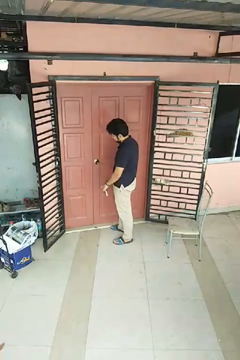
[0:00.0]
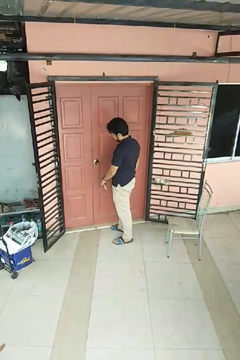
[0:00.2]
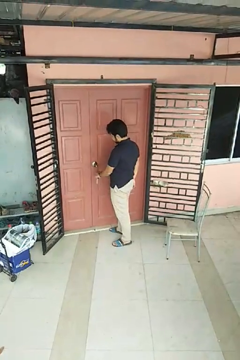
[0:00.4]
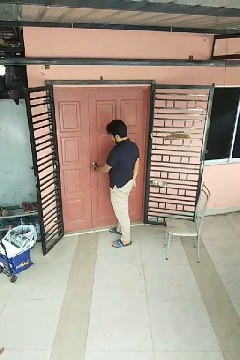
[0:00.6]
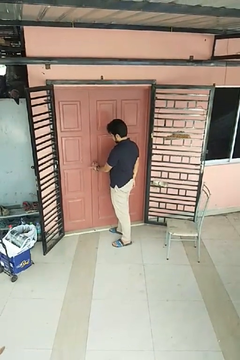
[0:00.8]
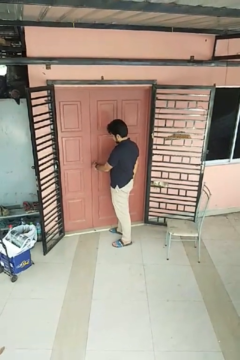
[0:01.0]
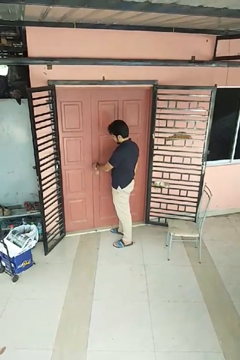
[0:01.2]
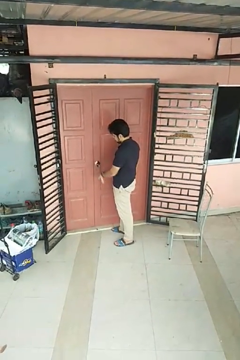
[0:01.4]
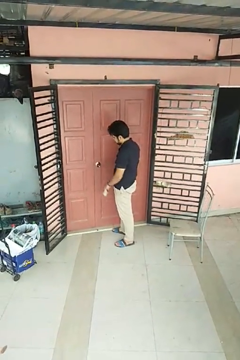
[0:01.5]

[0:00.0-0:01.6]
person unlocks door with keys

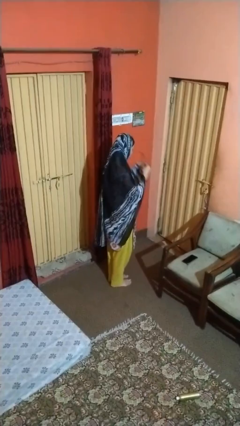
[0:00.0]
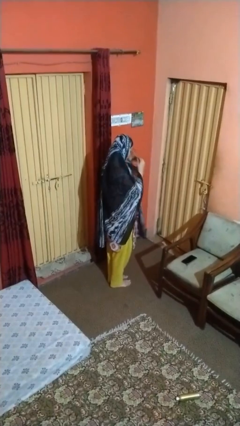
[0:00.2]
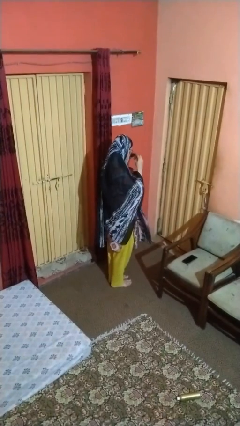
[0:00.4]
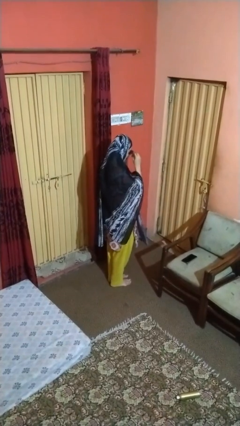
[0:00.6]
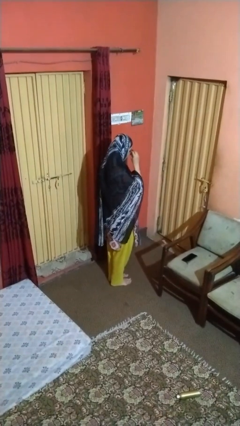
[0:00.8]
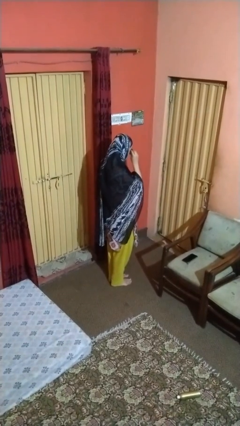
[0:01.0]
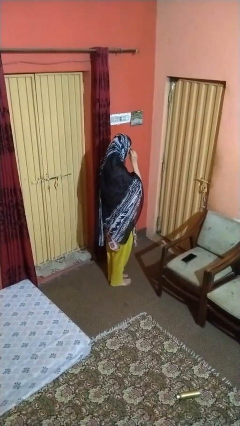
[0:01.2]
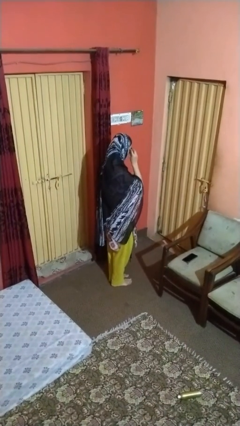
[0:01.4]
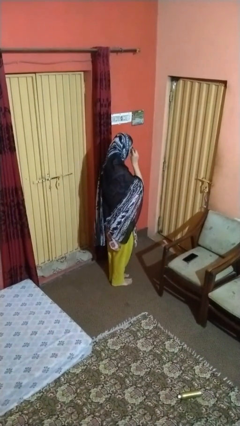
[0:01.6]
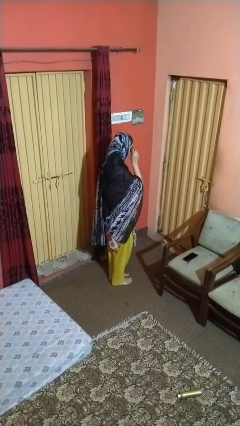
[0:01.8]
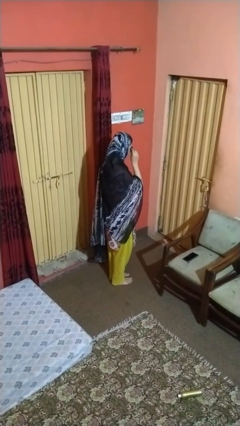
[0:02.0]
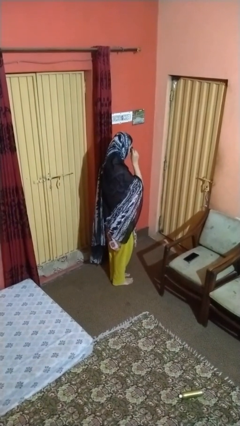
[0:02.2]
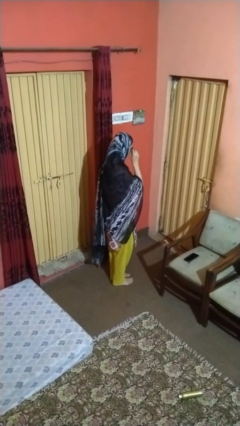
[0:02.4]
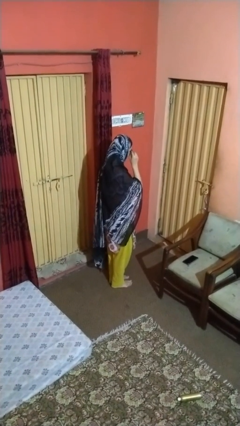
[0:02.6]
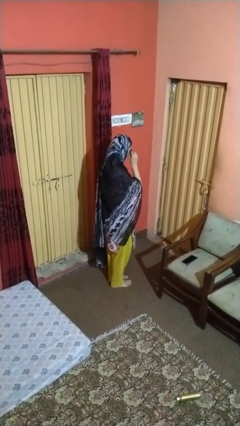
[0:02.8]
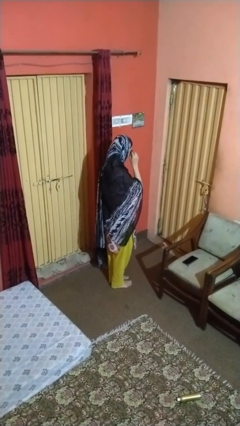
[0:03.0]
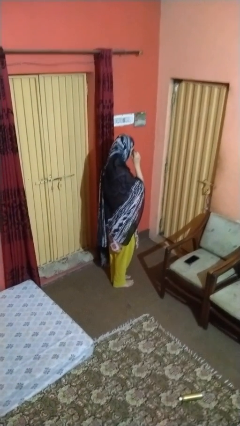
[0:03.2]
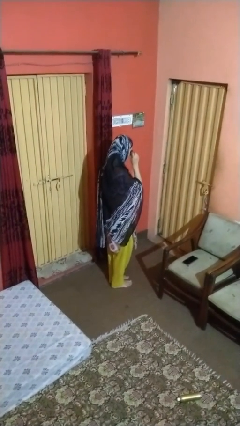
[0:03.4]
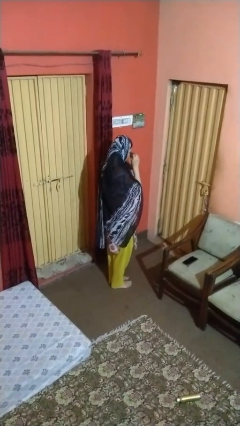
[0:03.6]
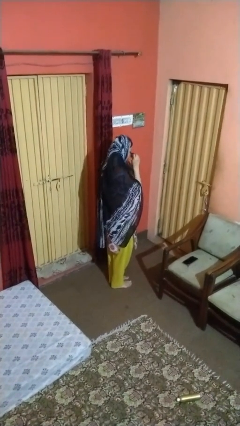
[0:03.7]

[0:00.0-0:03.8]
person puts on sunglasses

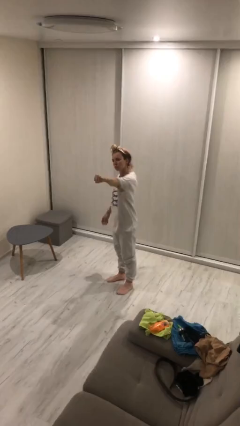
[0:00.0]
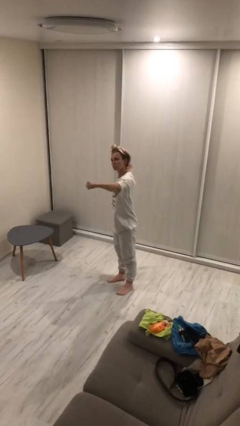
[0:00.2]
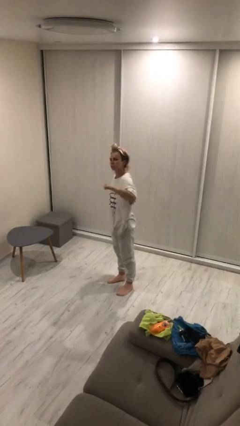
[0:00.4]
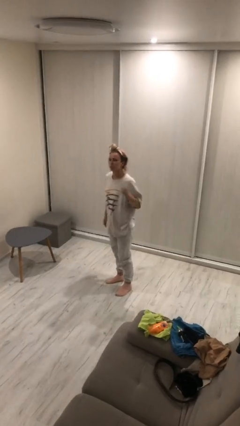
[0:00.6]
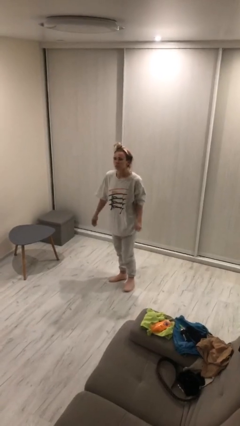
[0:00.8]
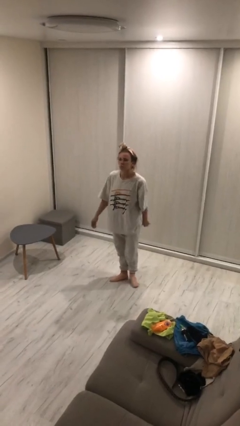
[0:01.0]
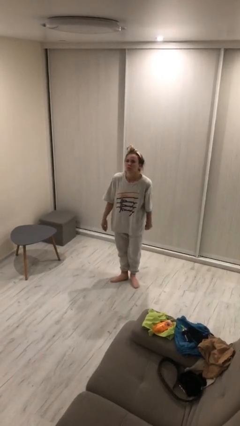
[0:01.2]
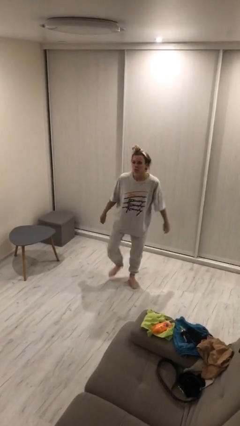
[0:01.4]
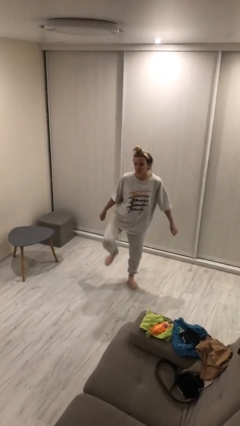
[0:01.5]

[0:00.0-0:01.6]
person karate chop

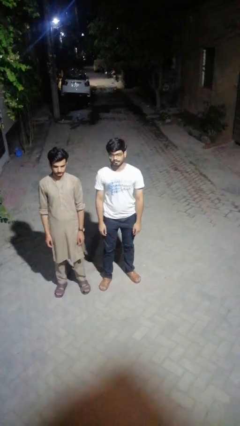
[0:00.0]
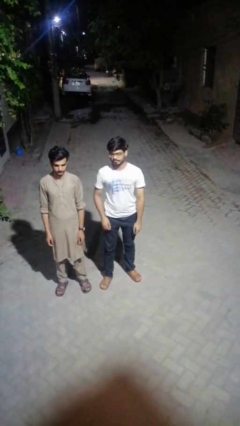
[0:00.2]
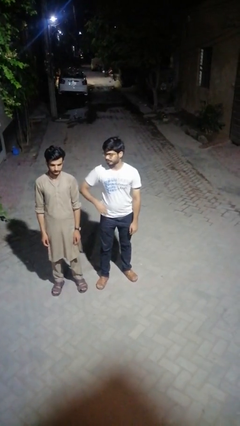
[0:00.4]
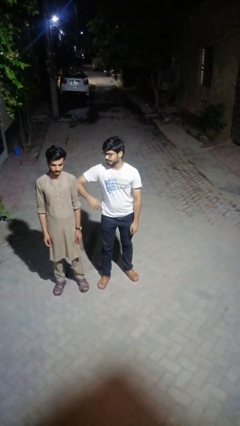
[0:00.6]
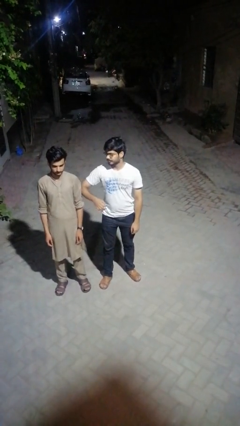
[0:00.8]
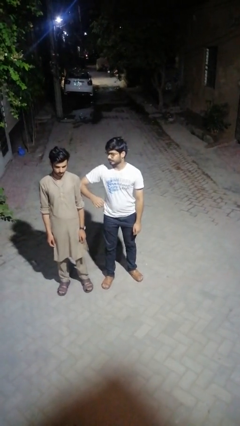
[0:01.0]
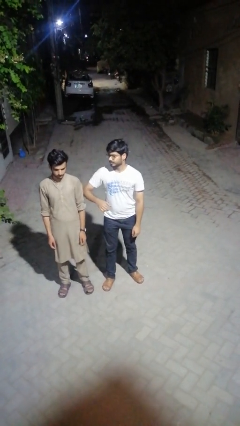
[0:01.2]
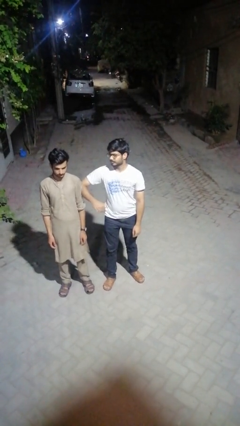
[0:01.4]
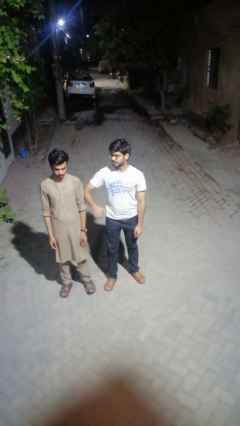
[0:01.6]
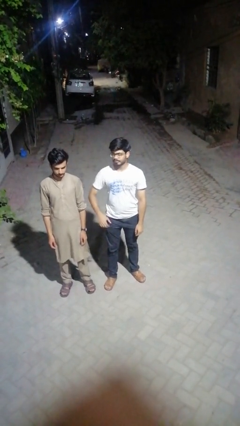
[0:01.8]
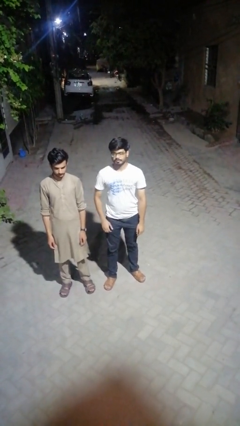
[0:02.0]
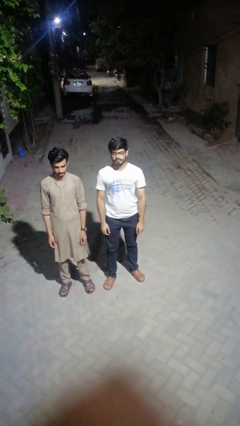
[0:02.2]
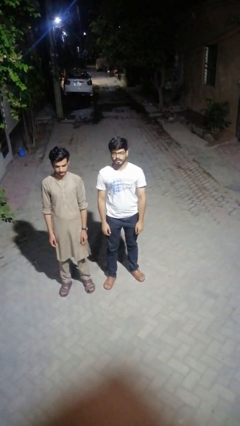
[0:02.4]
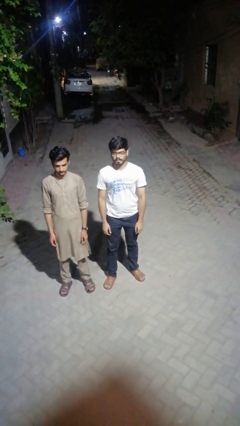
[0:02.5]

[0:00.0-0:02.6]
person nudges person with elbow

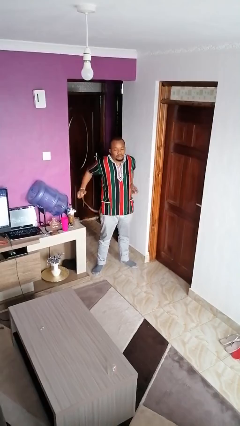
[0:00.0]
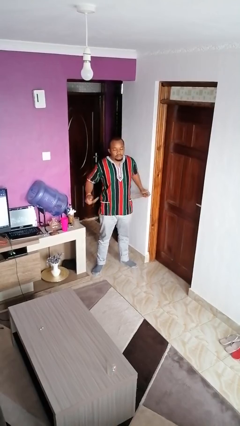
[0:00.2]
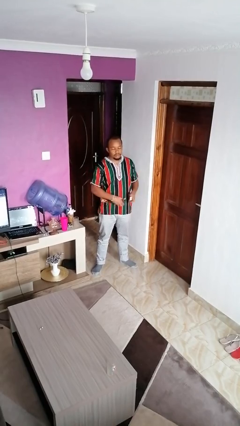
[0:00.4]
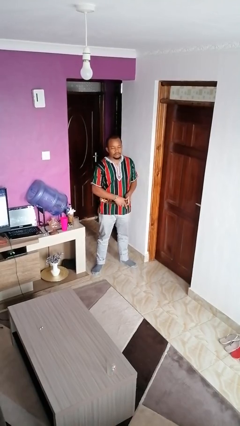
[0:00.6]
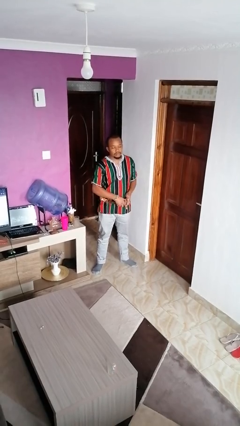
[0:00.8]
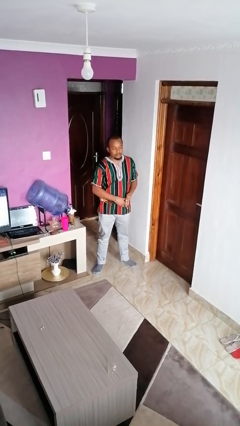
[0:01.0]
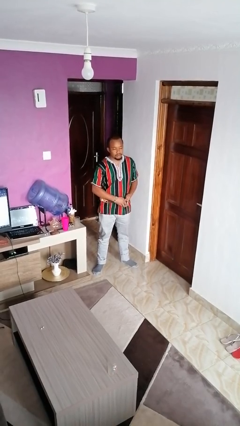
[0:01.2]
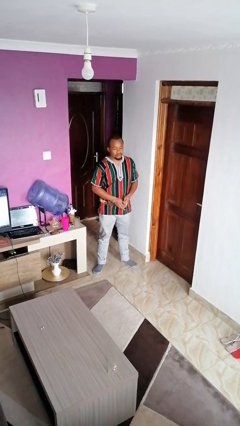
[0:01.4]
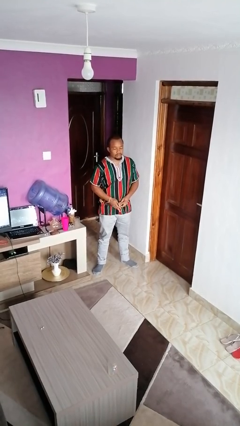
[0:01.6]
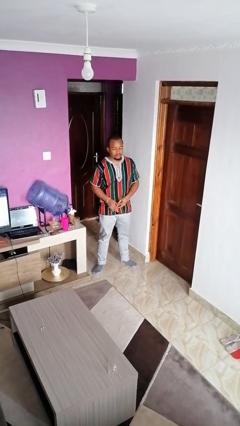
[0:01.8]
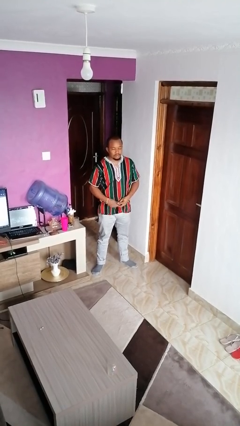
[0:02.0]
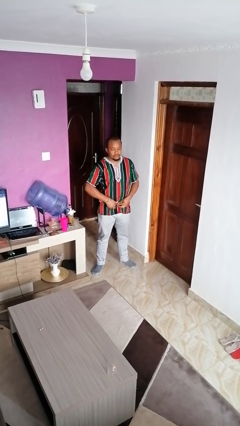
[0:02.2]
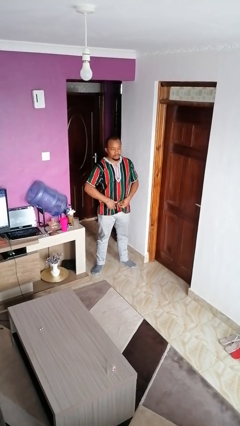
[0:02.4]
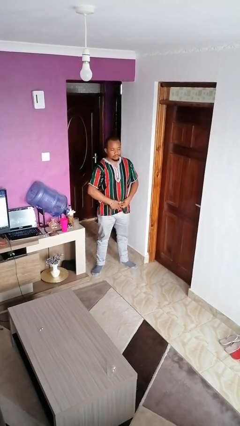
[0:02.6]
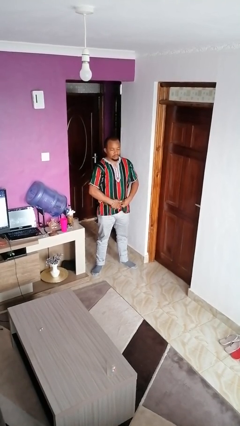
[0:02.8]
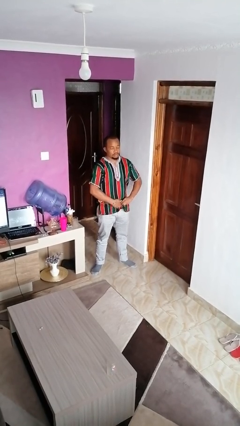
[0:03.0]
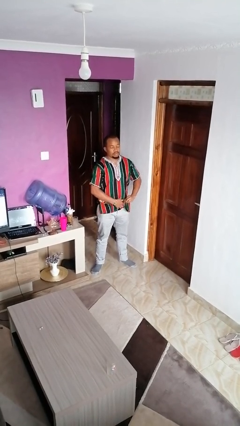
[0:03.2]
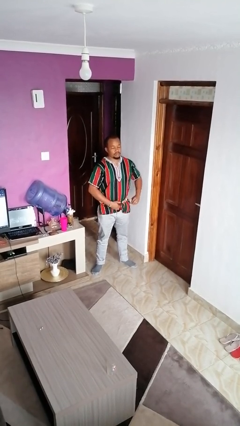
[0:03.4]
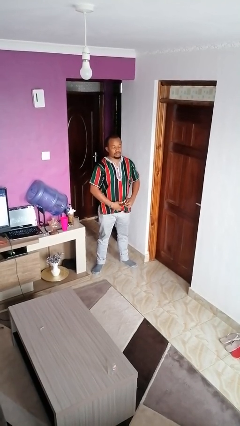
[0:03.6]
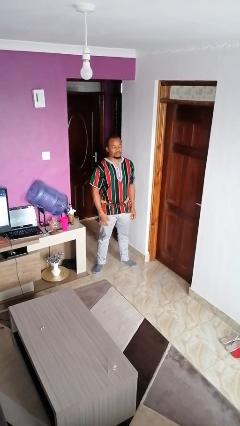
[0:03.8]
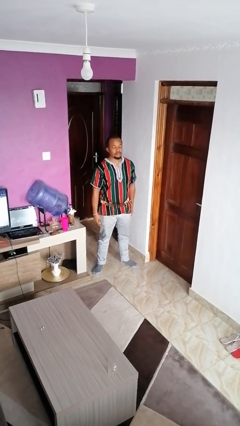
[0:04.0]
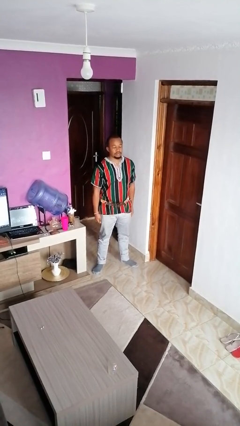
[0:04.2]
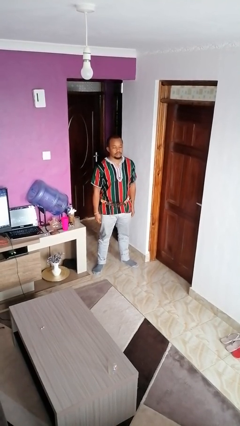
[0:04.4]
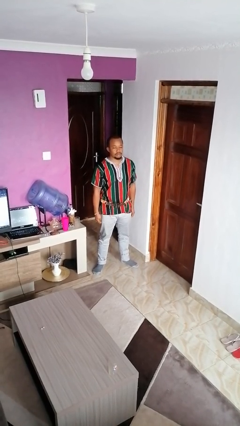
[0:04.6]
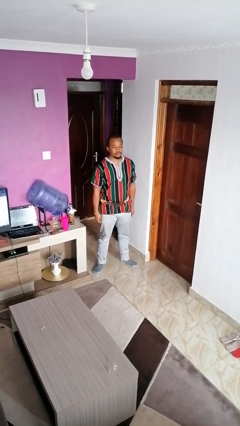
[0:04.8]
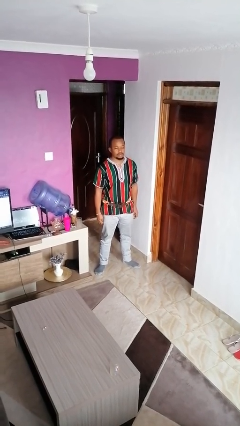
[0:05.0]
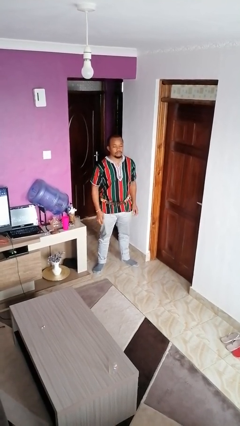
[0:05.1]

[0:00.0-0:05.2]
person puts on belt

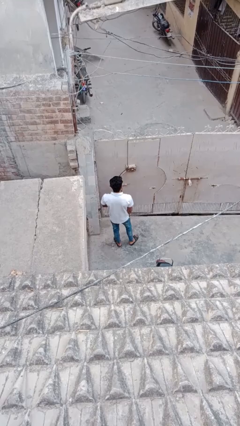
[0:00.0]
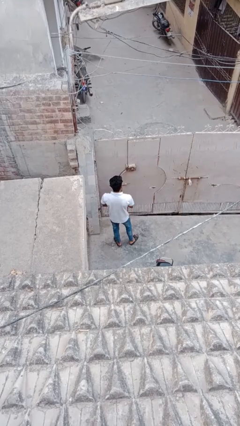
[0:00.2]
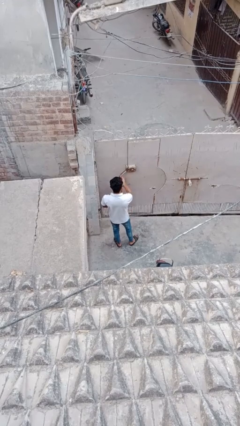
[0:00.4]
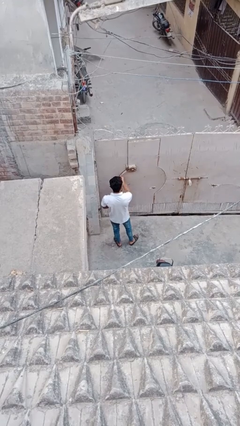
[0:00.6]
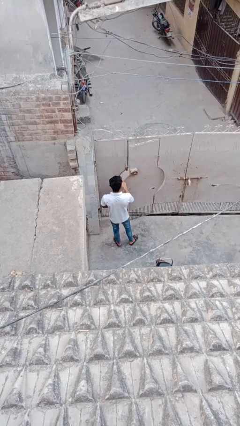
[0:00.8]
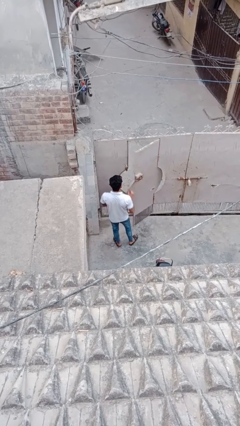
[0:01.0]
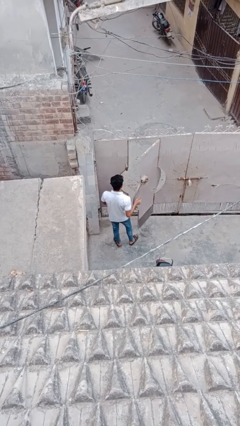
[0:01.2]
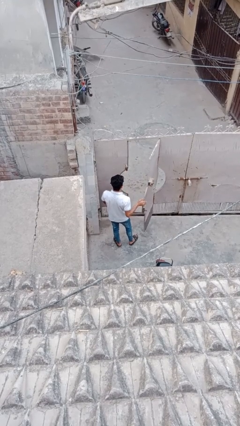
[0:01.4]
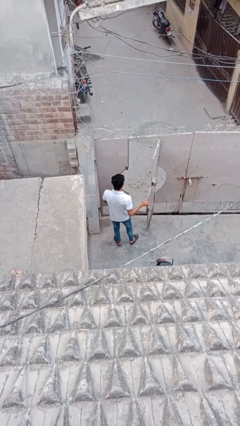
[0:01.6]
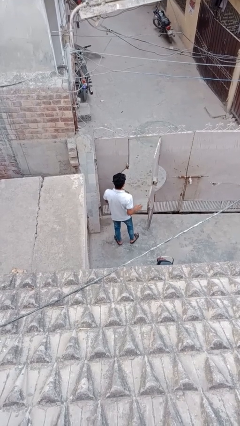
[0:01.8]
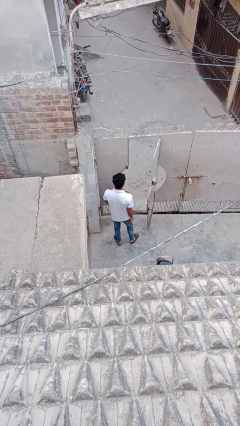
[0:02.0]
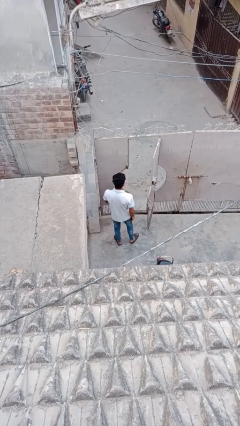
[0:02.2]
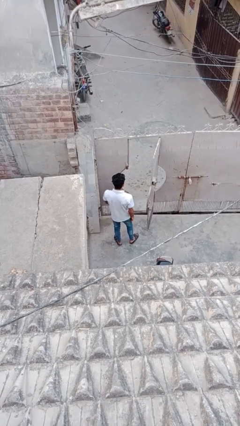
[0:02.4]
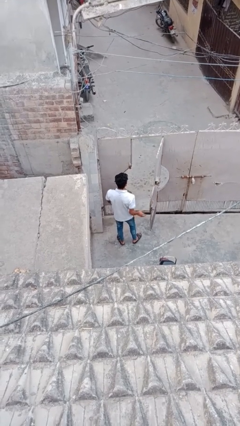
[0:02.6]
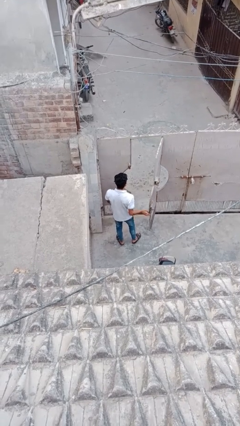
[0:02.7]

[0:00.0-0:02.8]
person opens facility door
